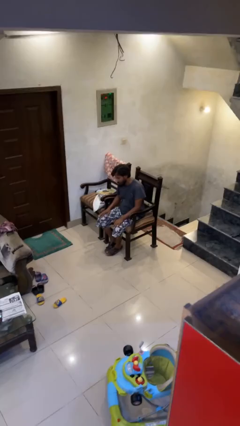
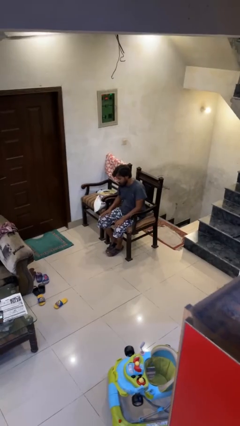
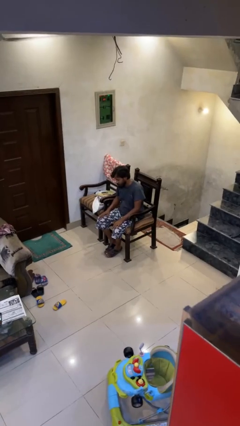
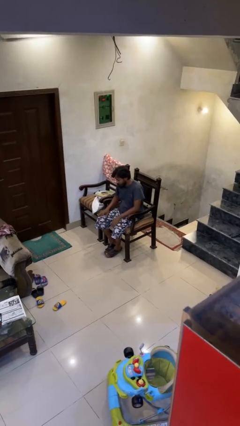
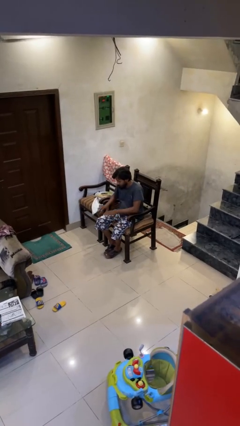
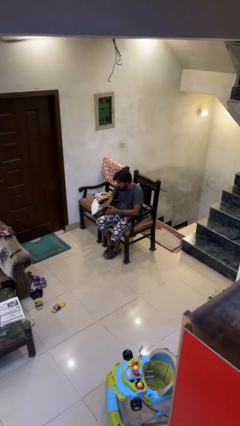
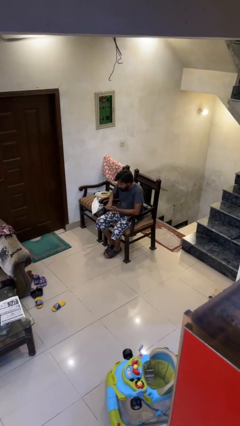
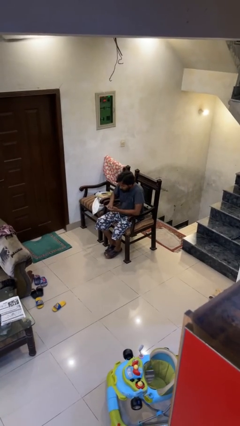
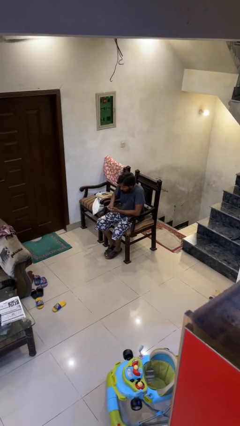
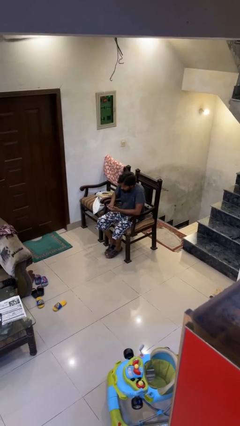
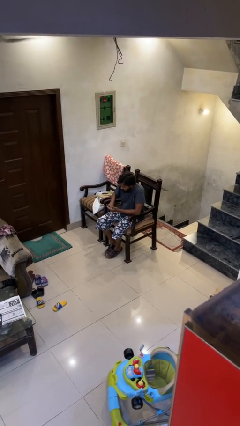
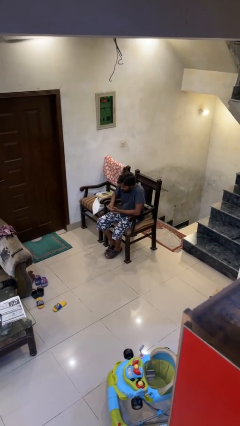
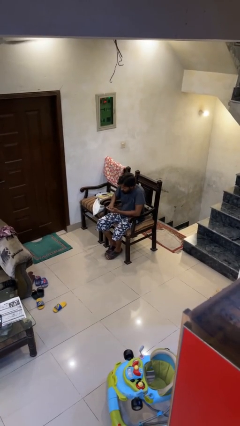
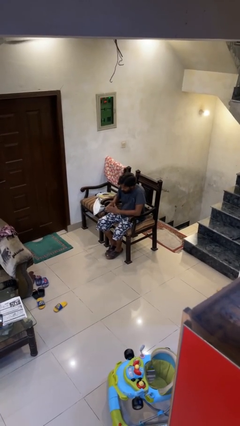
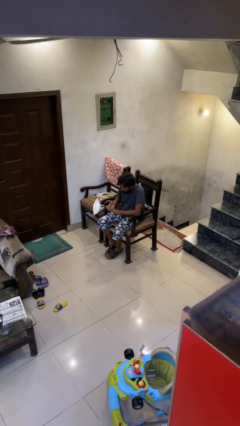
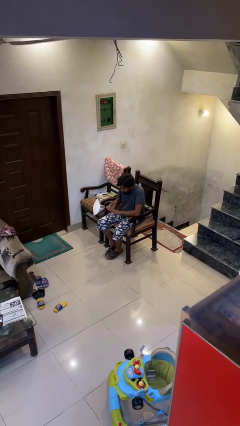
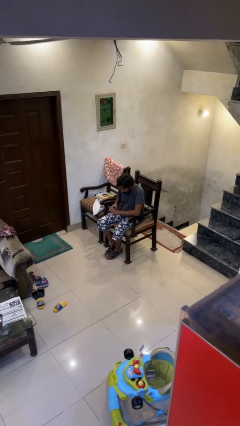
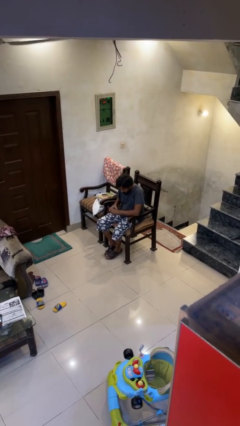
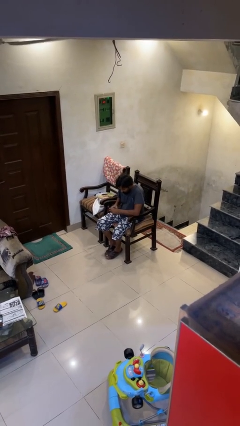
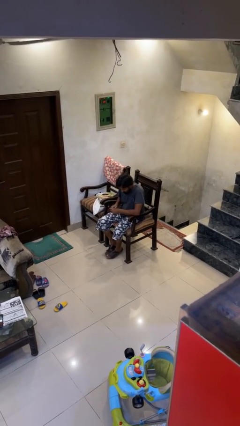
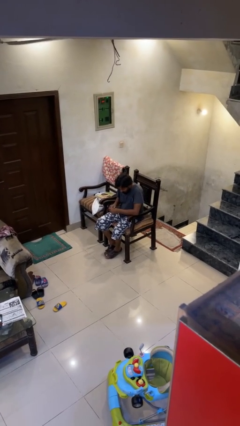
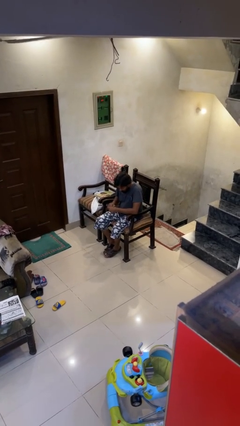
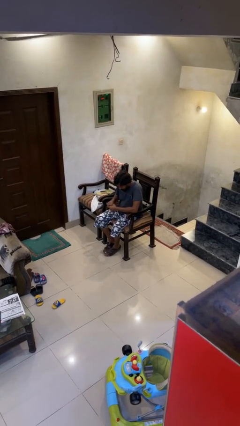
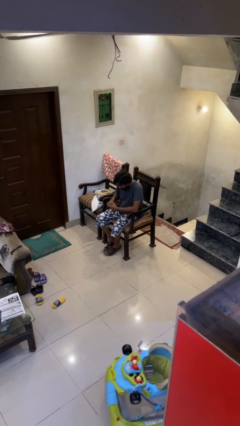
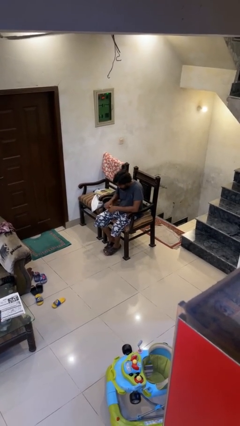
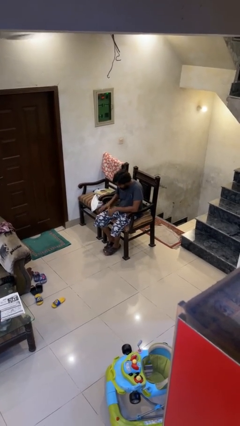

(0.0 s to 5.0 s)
person looks at hands in lap

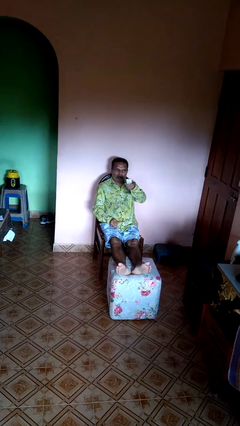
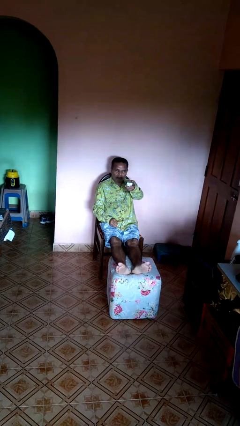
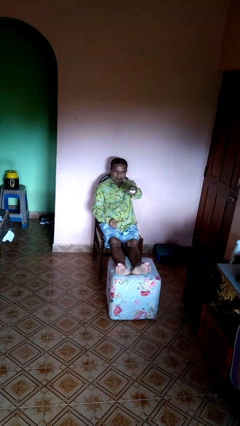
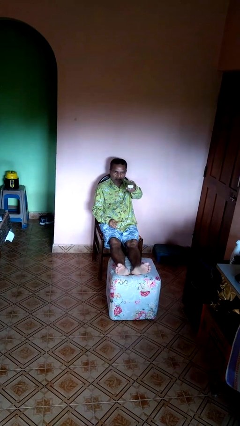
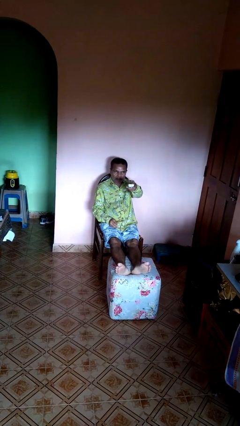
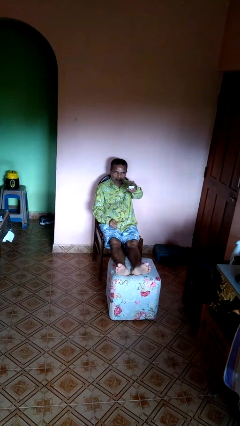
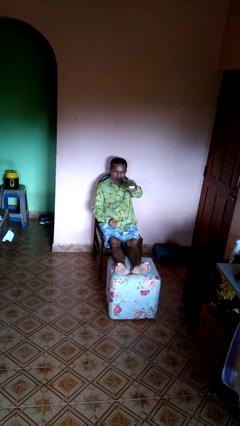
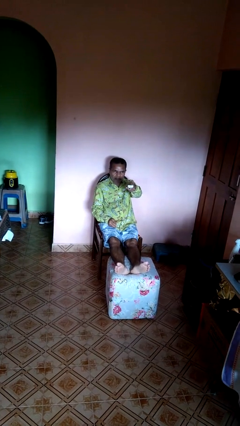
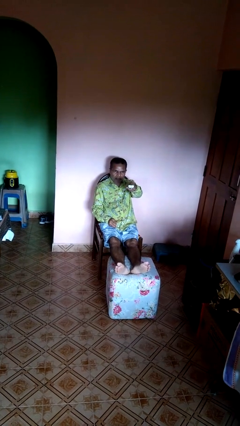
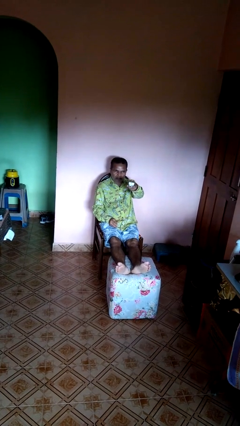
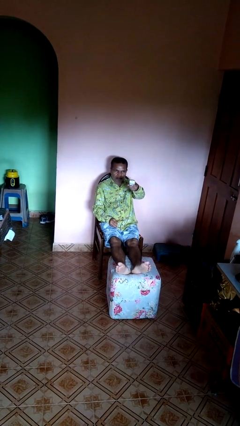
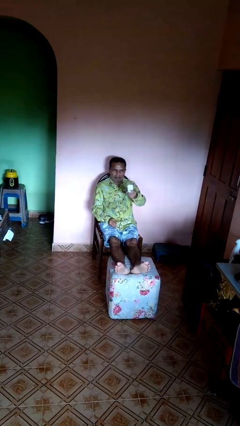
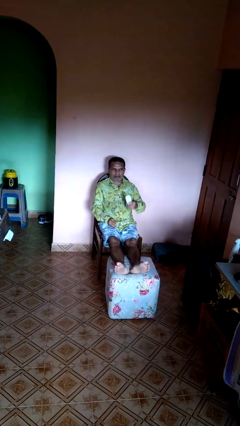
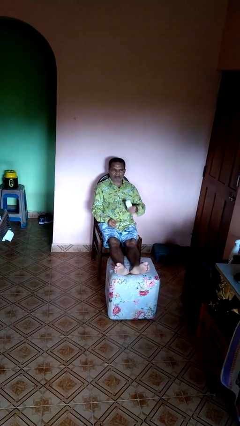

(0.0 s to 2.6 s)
person uses television remote

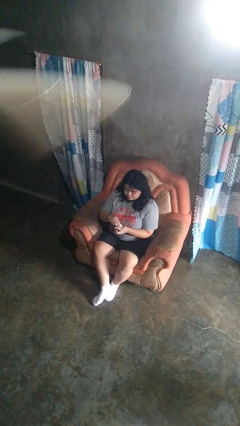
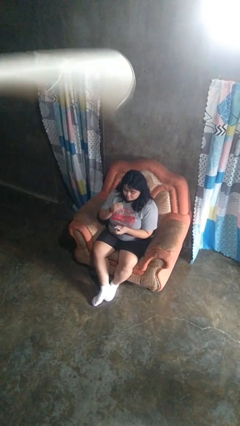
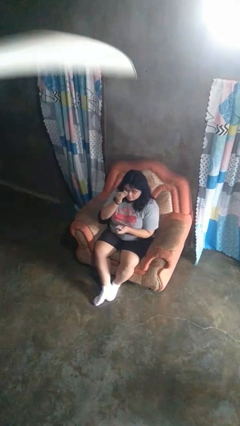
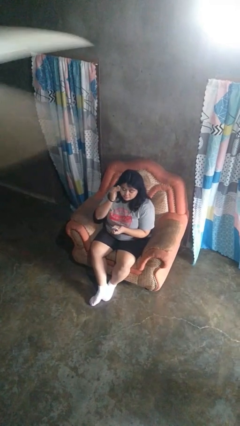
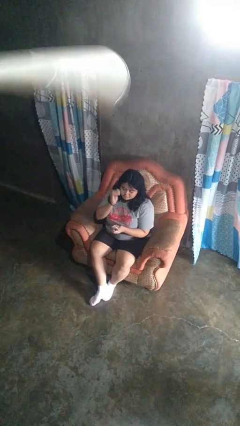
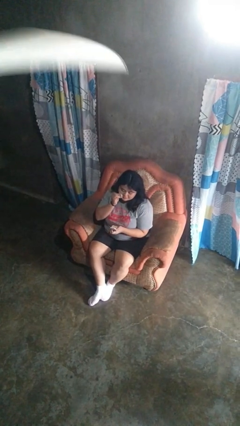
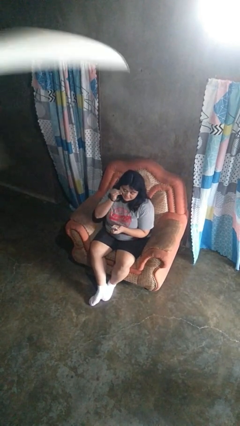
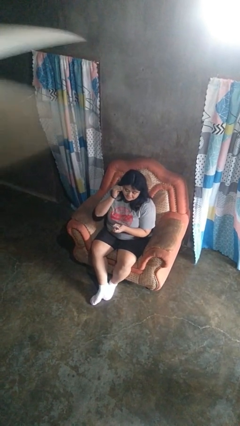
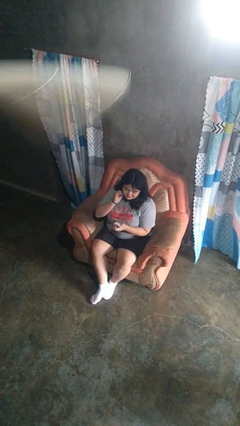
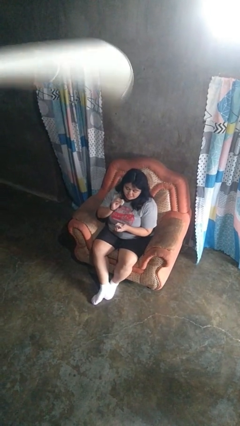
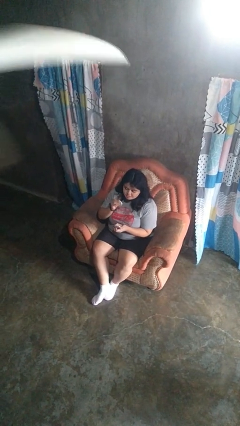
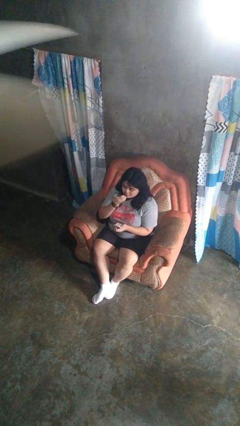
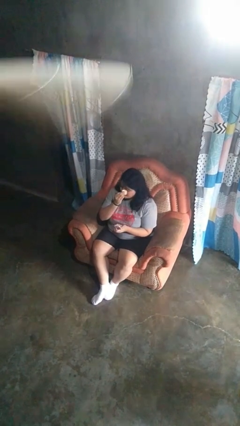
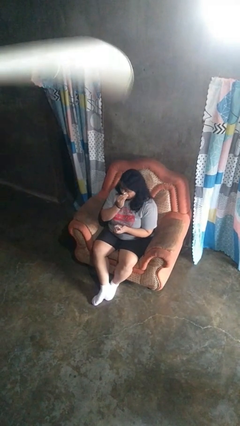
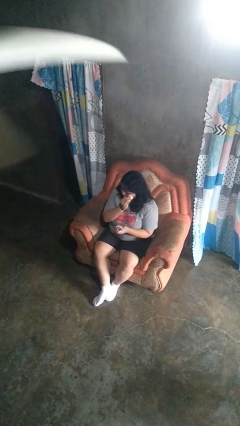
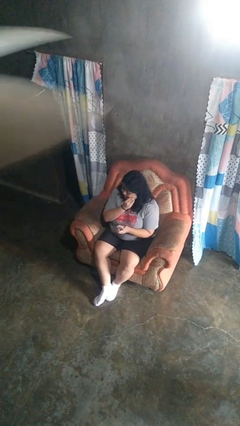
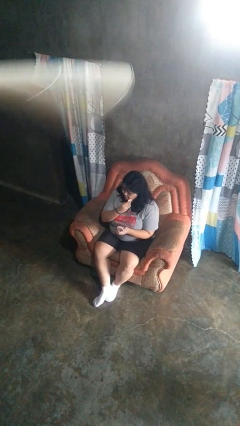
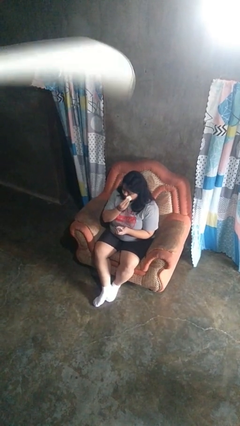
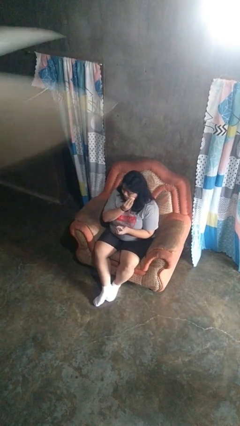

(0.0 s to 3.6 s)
person applies foundation makeup

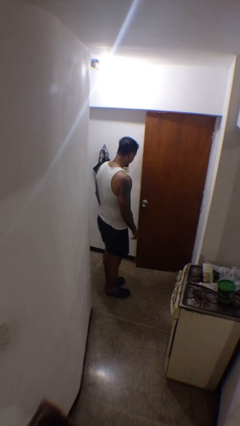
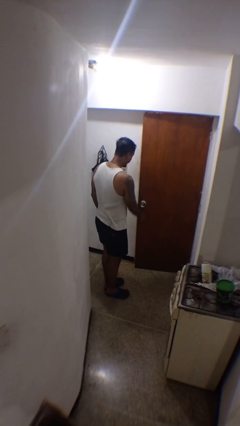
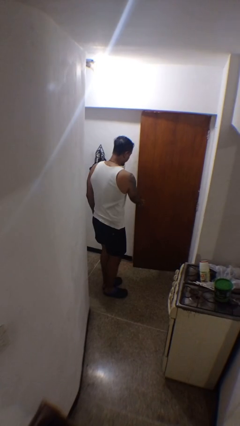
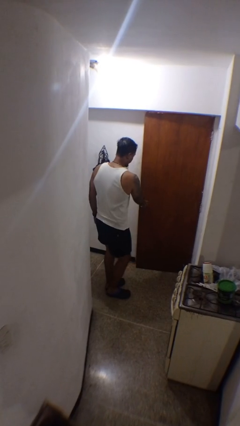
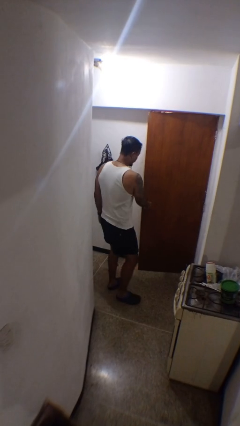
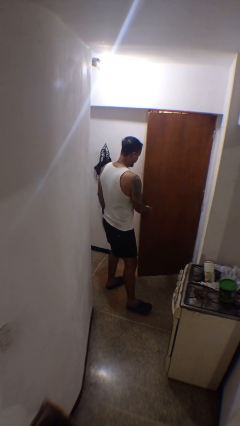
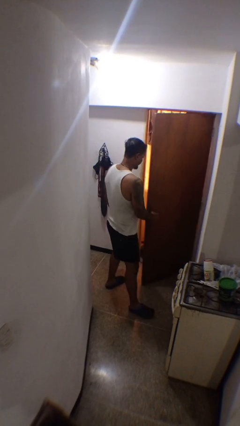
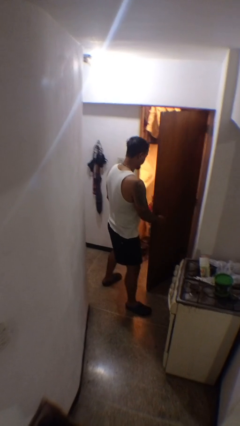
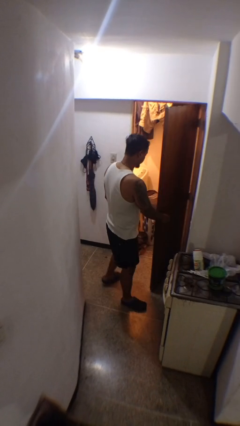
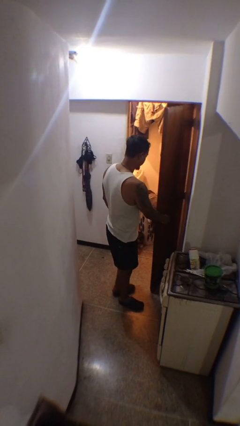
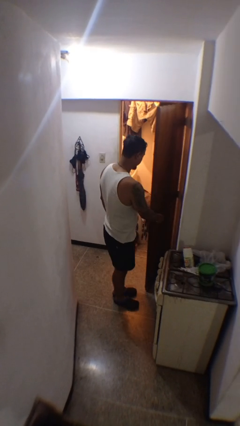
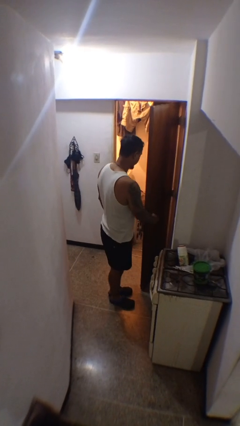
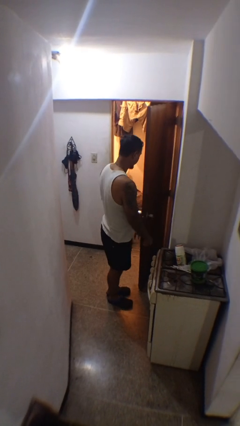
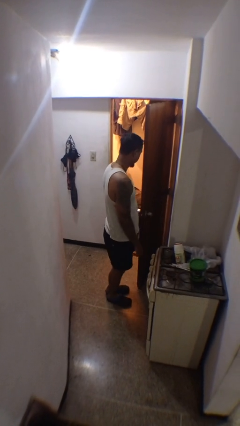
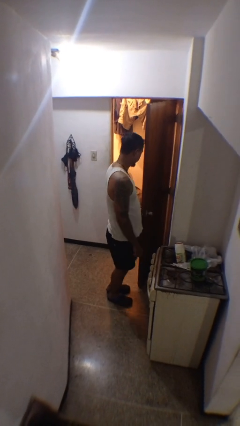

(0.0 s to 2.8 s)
person opens facility door

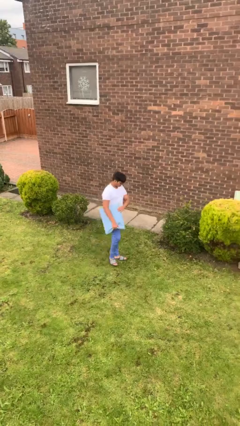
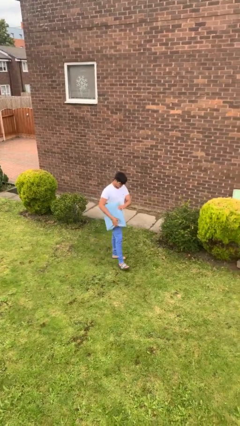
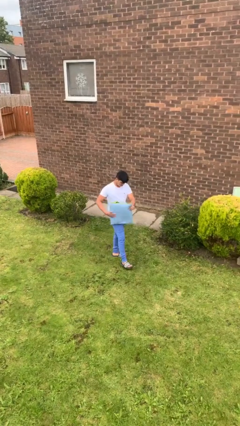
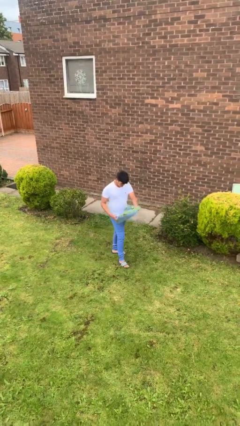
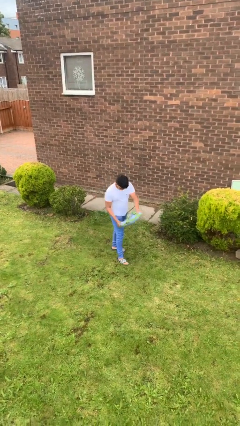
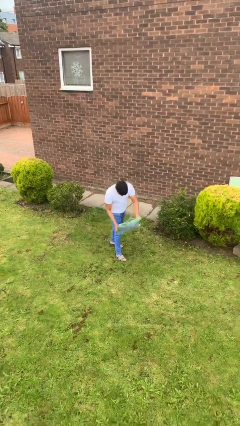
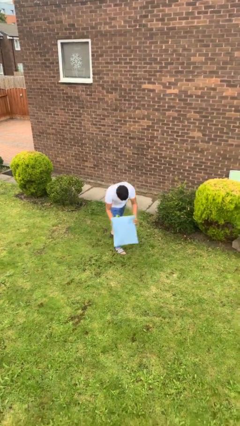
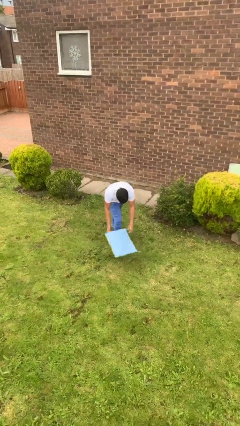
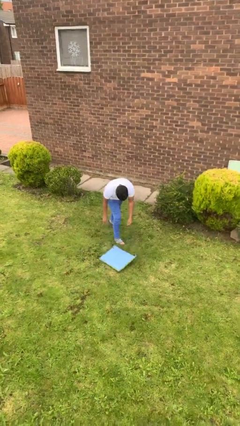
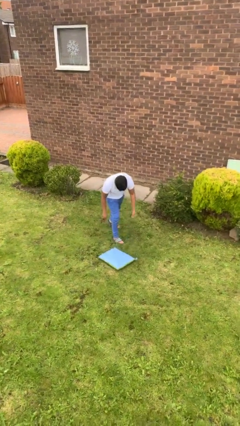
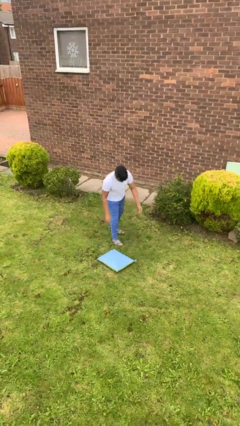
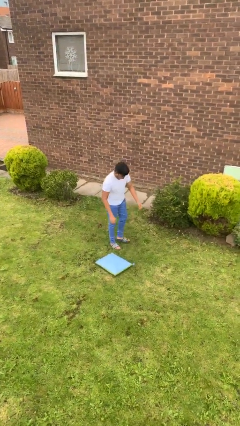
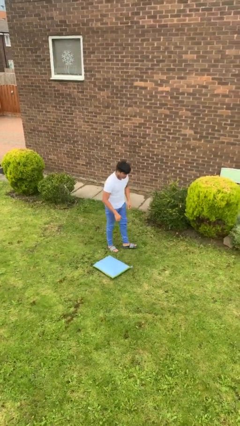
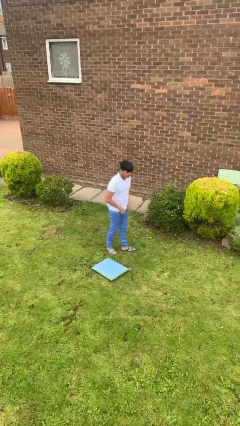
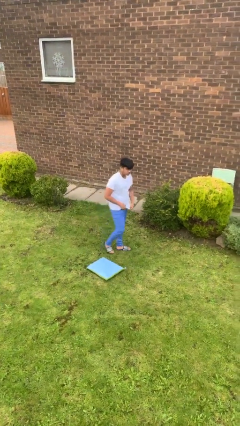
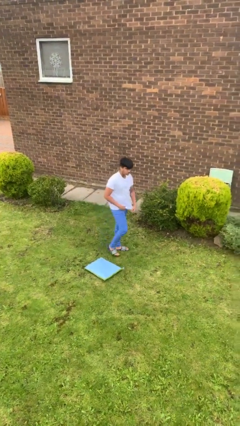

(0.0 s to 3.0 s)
person puts down object on floor

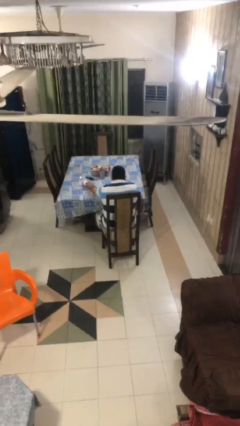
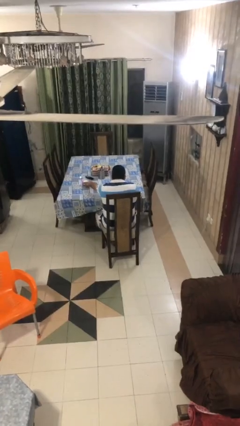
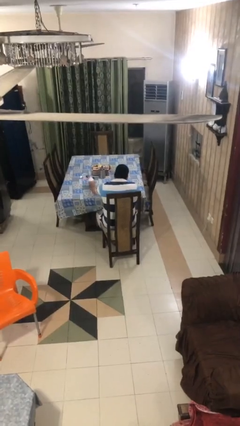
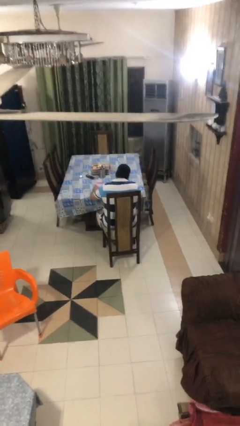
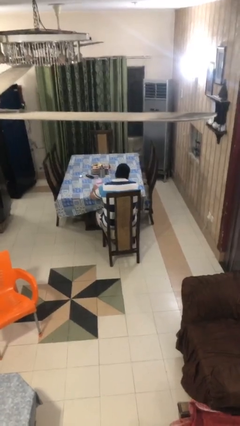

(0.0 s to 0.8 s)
person sets upright glass
